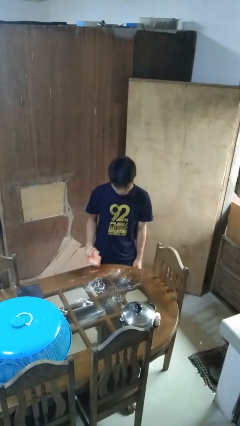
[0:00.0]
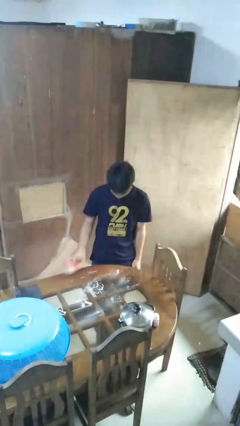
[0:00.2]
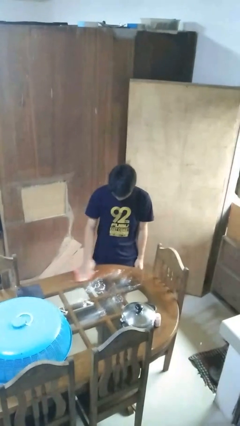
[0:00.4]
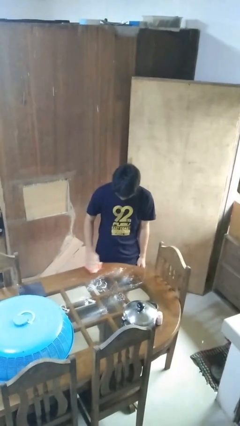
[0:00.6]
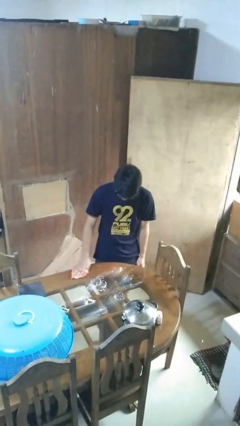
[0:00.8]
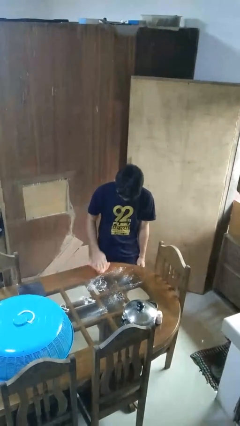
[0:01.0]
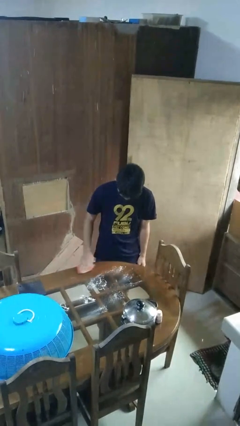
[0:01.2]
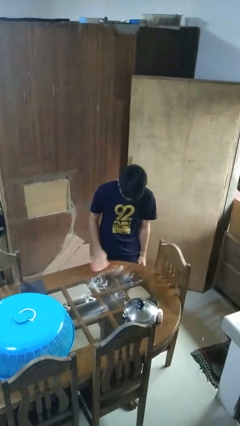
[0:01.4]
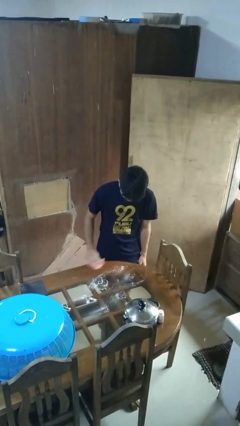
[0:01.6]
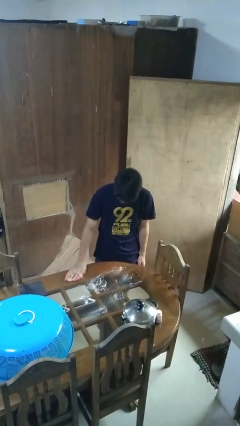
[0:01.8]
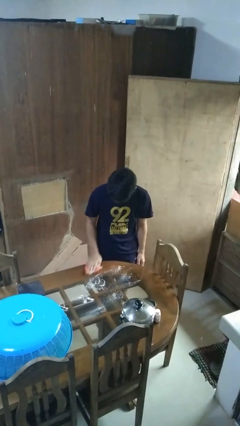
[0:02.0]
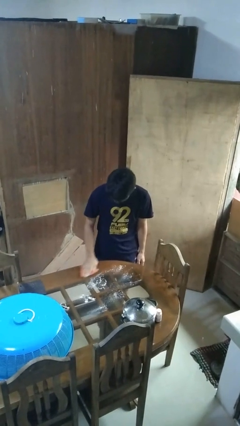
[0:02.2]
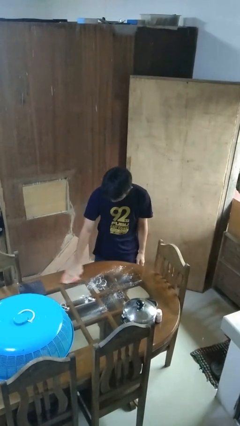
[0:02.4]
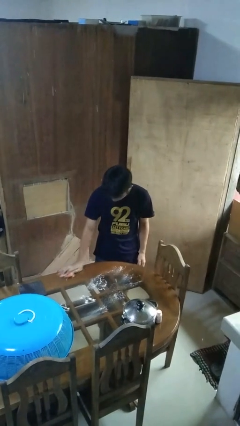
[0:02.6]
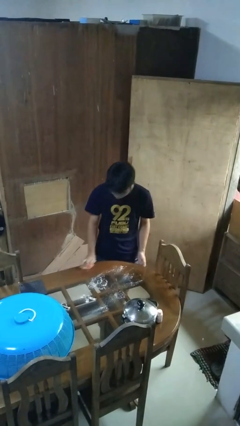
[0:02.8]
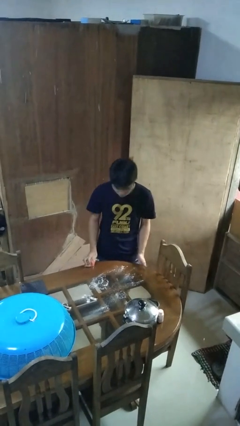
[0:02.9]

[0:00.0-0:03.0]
person cleans table with rag

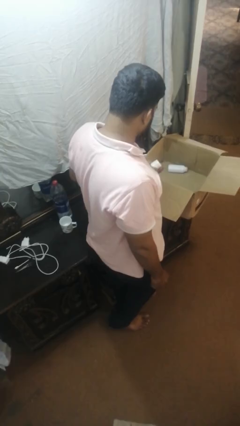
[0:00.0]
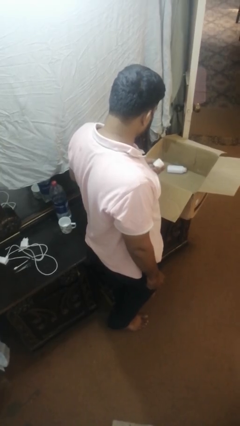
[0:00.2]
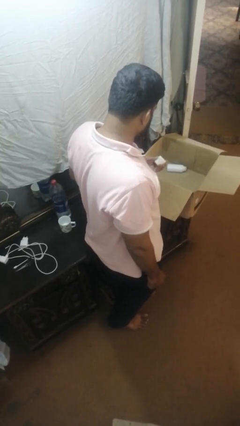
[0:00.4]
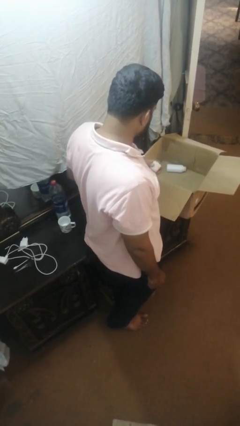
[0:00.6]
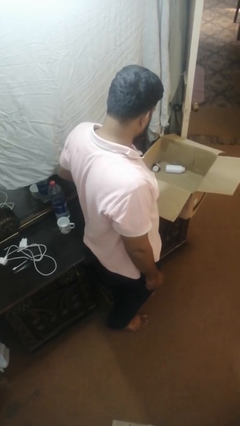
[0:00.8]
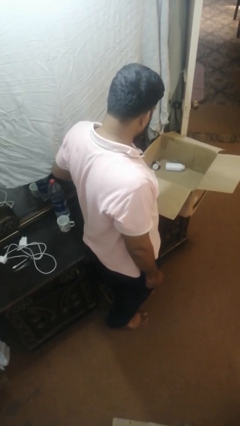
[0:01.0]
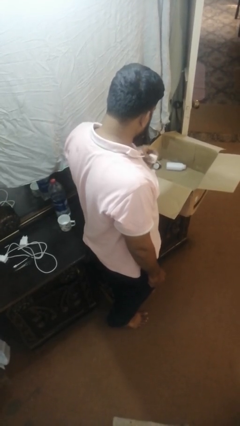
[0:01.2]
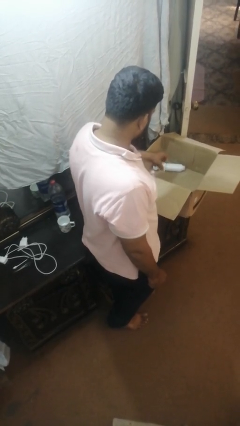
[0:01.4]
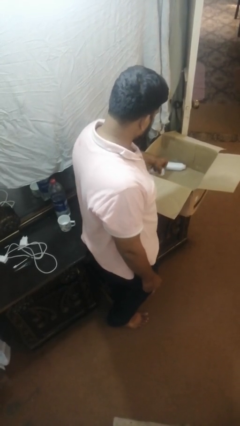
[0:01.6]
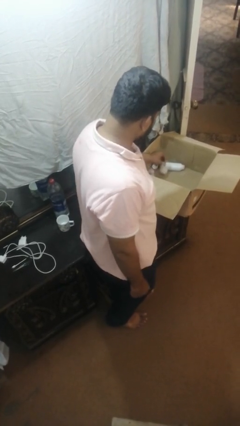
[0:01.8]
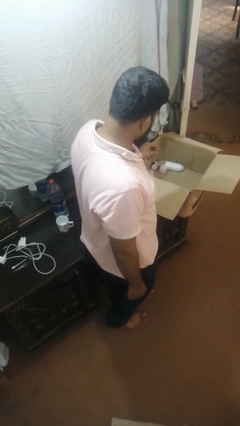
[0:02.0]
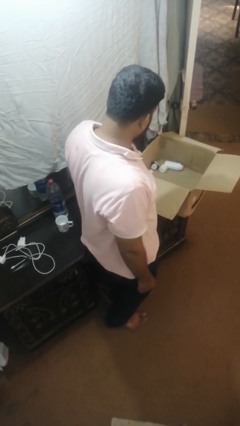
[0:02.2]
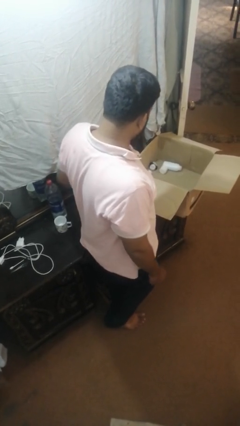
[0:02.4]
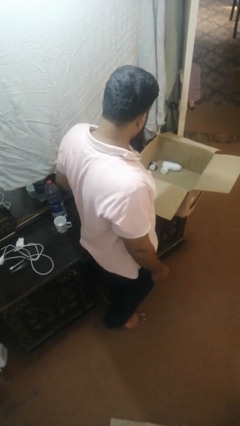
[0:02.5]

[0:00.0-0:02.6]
person puts object into box

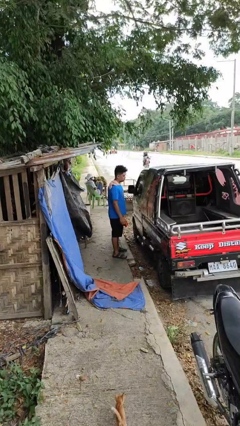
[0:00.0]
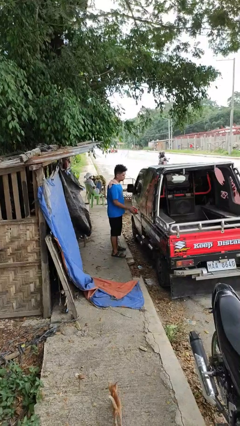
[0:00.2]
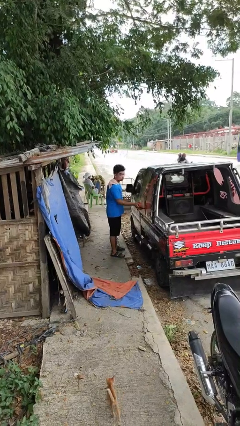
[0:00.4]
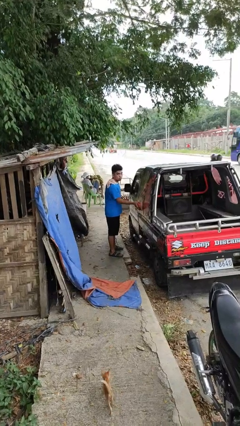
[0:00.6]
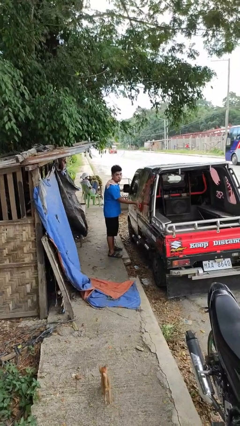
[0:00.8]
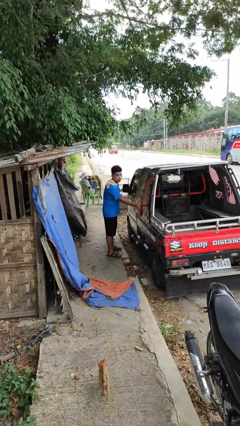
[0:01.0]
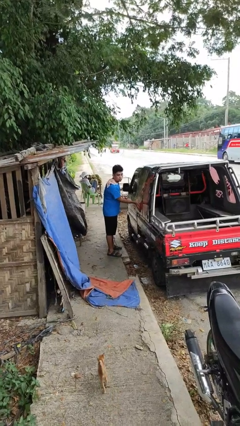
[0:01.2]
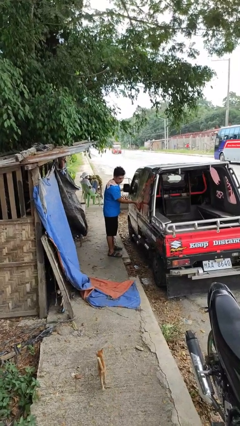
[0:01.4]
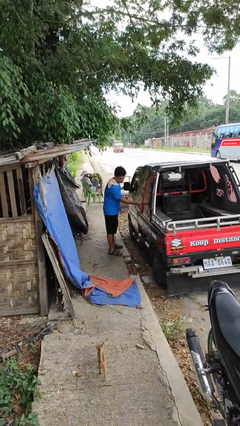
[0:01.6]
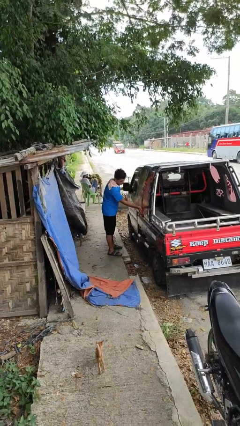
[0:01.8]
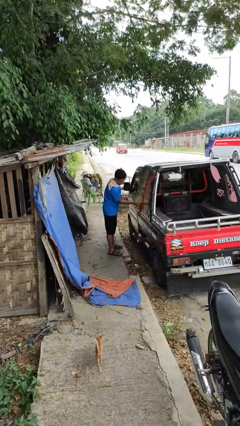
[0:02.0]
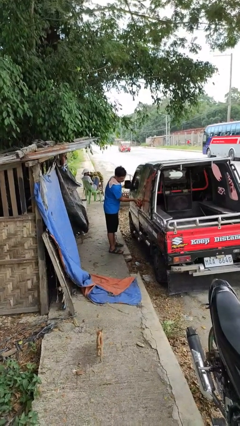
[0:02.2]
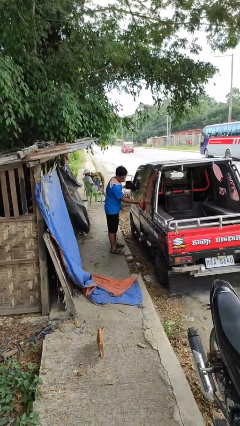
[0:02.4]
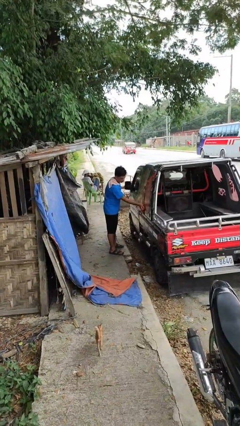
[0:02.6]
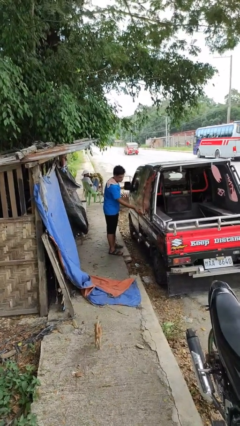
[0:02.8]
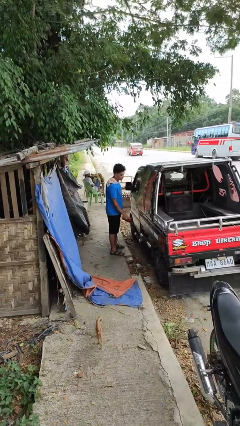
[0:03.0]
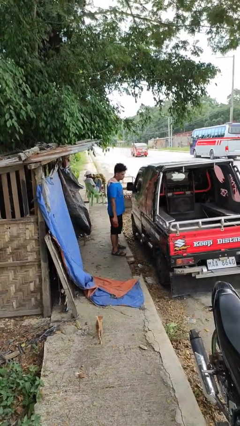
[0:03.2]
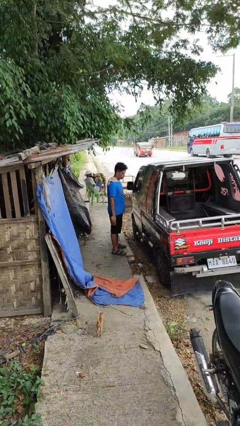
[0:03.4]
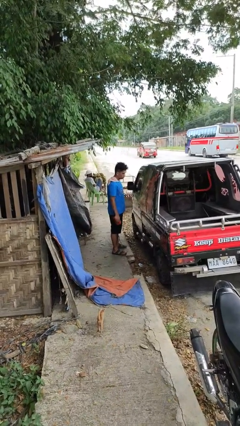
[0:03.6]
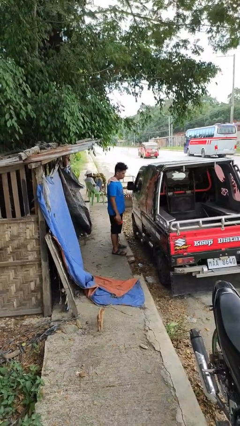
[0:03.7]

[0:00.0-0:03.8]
person polishes car with rag

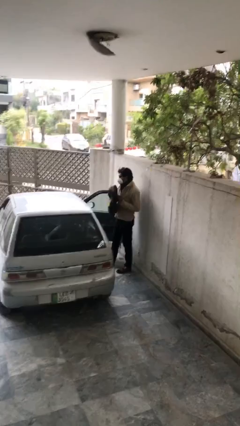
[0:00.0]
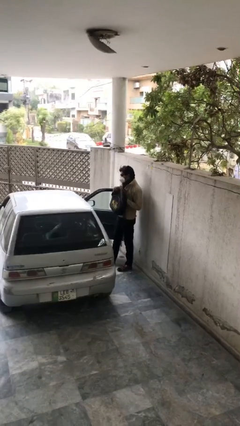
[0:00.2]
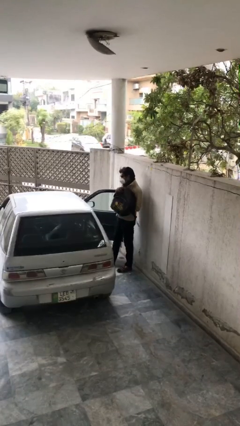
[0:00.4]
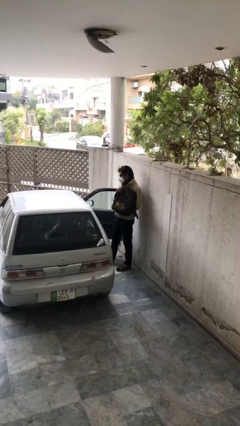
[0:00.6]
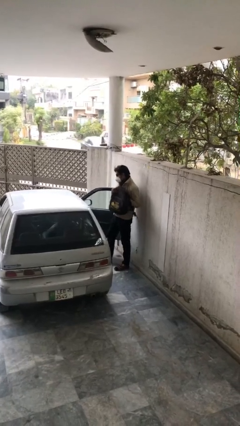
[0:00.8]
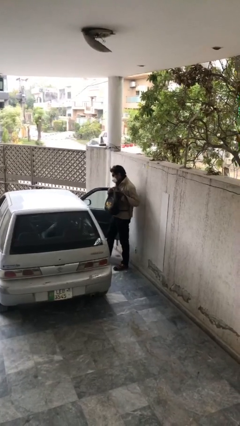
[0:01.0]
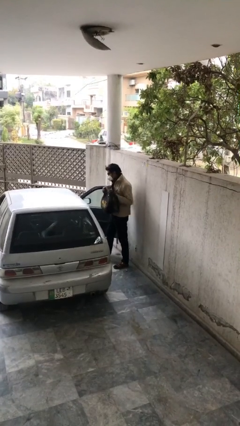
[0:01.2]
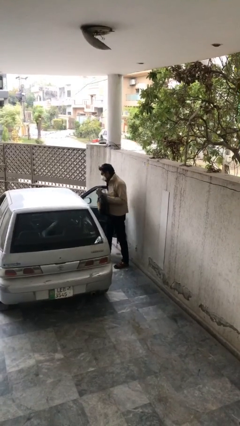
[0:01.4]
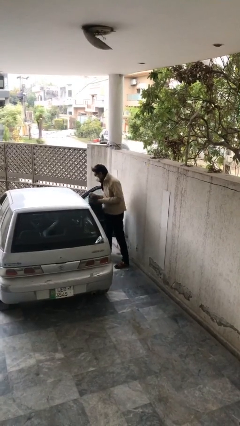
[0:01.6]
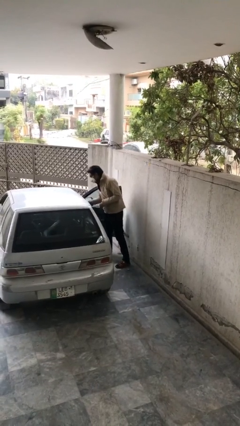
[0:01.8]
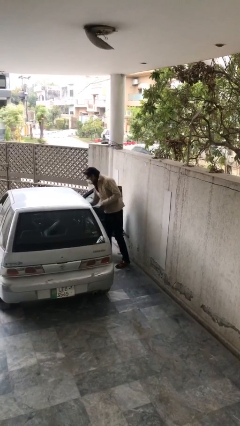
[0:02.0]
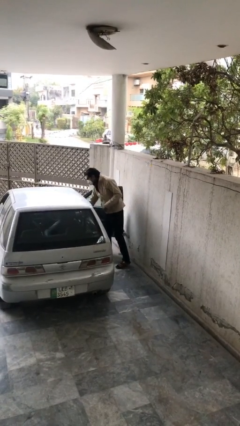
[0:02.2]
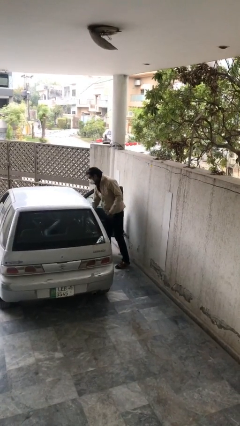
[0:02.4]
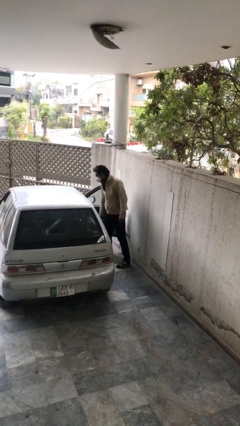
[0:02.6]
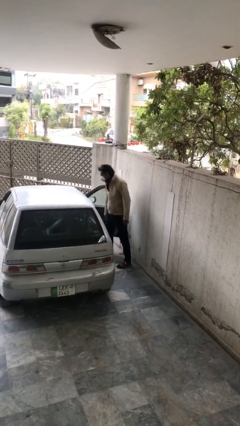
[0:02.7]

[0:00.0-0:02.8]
person loads car

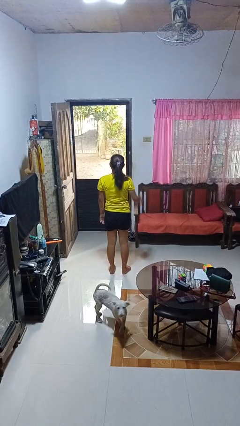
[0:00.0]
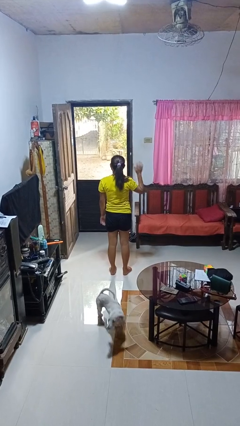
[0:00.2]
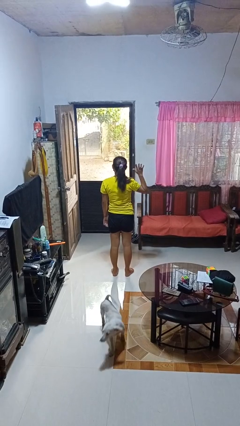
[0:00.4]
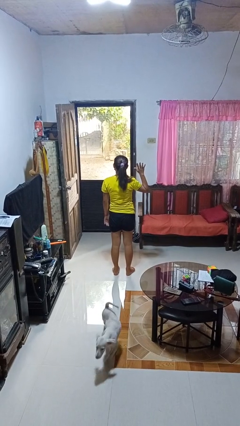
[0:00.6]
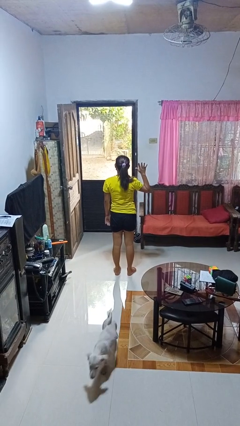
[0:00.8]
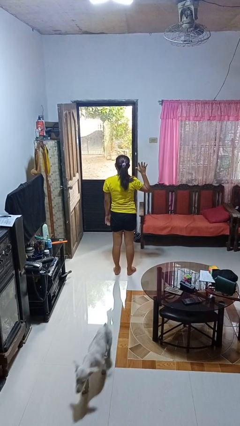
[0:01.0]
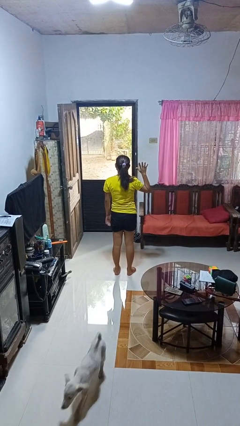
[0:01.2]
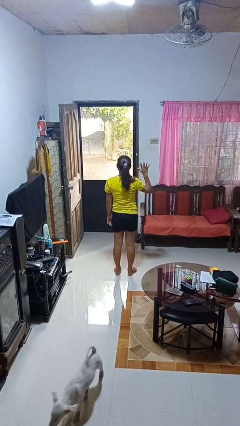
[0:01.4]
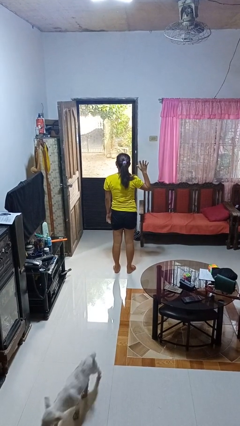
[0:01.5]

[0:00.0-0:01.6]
person gestures number five

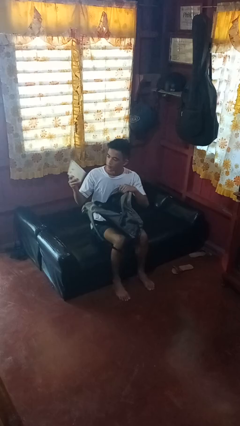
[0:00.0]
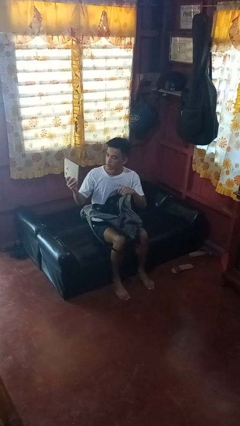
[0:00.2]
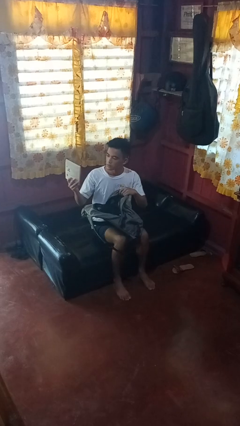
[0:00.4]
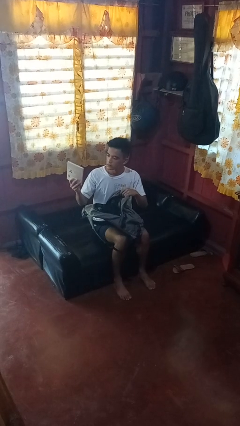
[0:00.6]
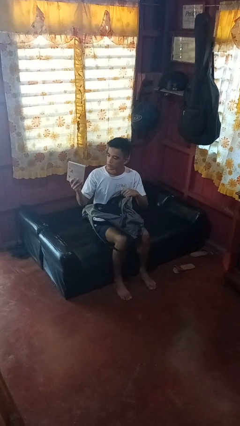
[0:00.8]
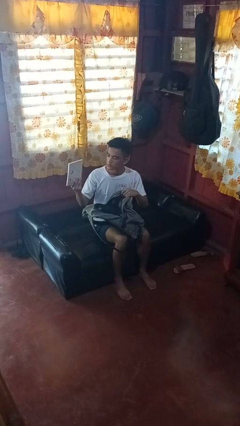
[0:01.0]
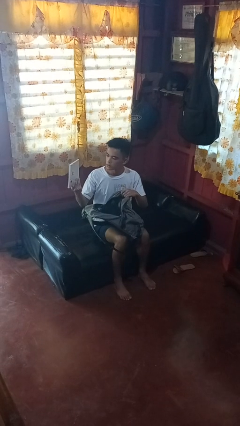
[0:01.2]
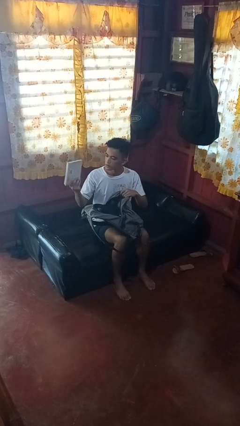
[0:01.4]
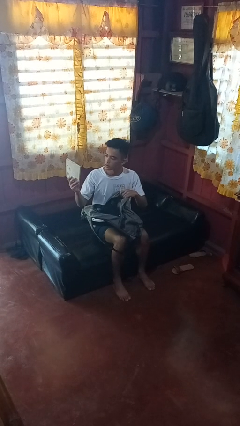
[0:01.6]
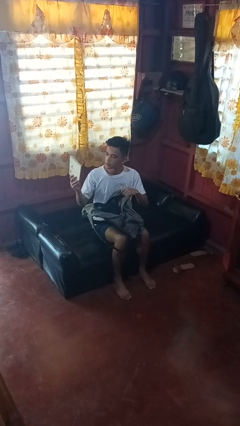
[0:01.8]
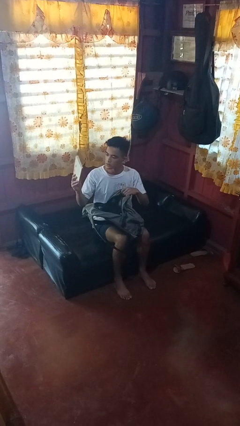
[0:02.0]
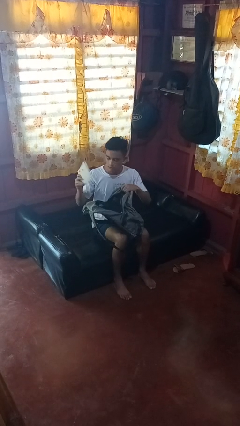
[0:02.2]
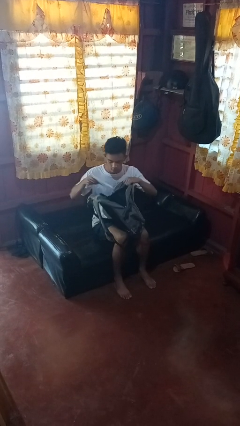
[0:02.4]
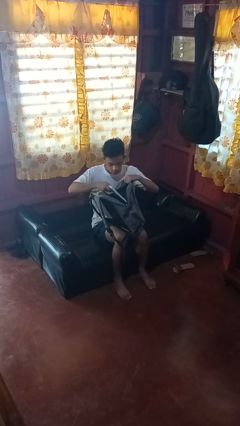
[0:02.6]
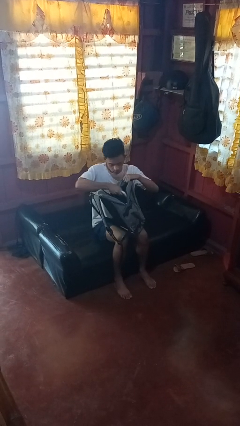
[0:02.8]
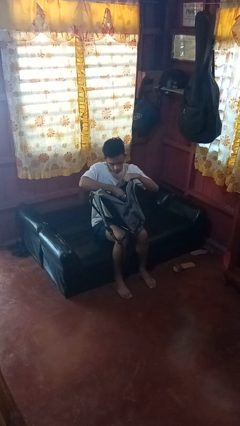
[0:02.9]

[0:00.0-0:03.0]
person takes object from backpack

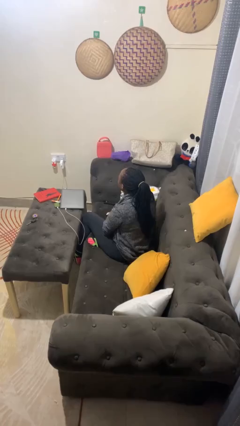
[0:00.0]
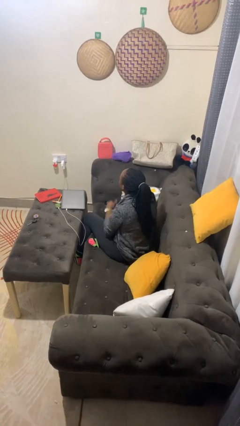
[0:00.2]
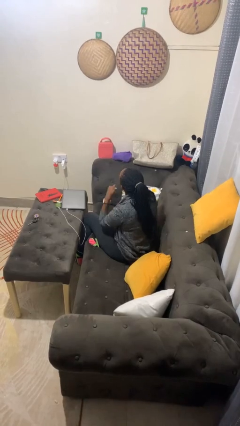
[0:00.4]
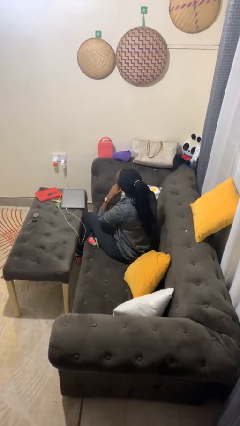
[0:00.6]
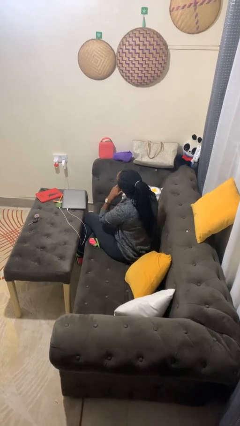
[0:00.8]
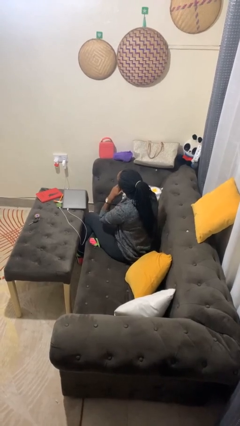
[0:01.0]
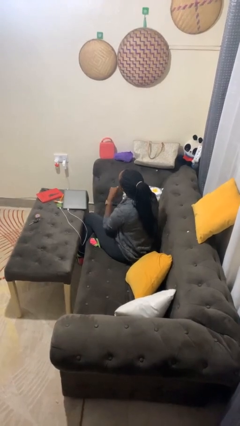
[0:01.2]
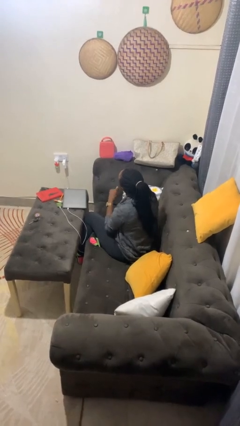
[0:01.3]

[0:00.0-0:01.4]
person gestures call me
